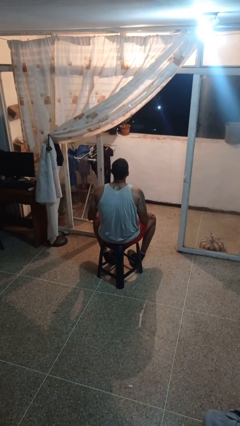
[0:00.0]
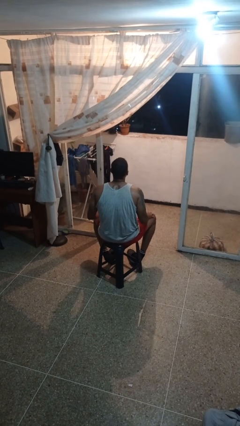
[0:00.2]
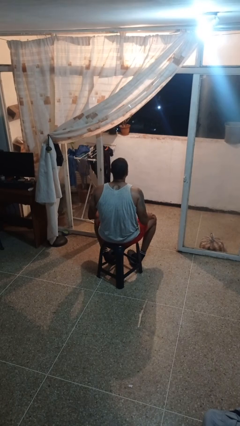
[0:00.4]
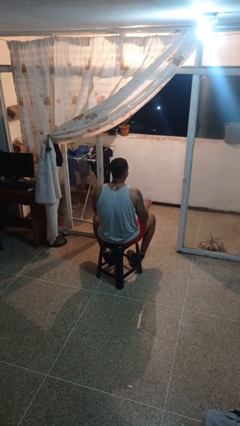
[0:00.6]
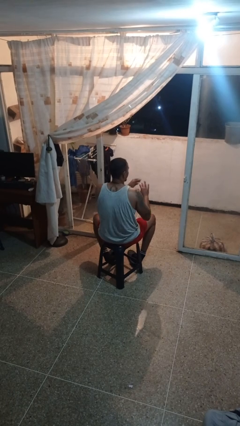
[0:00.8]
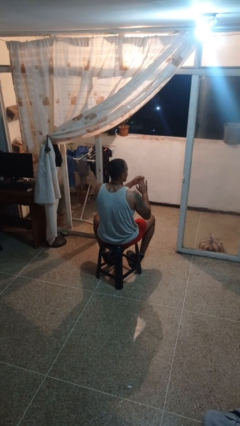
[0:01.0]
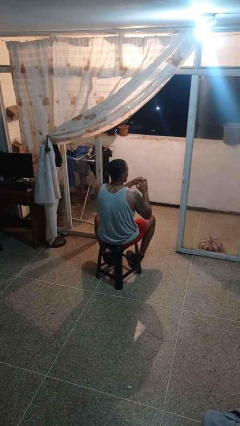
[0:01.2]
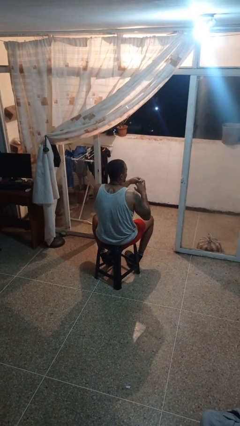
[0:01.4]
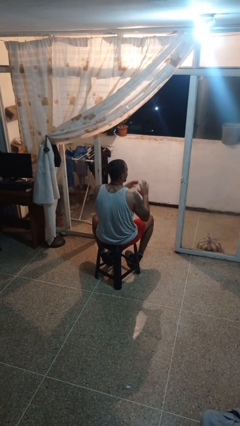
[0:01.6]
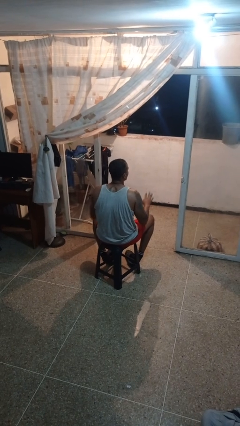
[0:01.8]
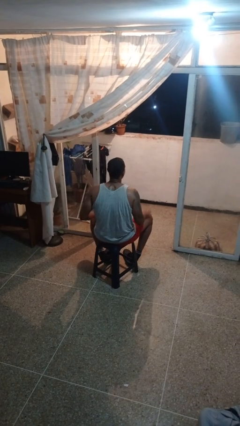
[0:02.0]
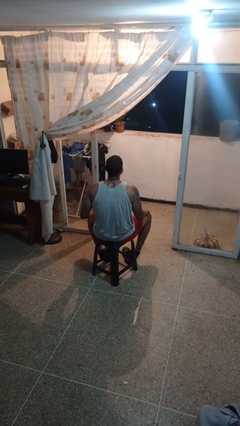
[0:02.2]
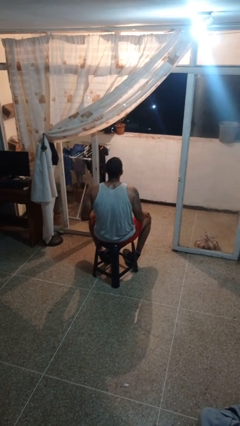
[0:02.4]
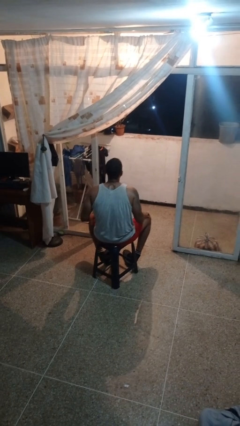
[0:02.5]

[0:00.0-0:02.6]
person puts on ring

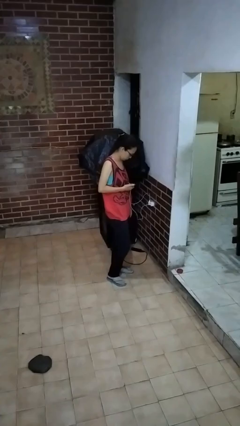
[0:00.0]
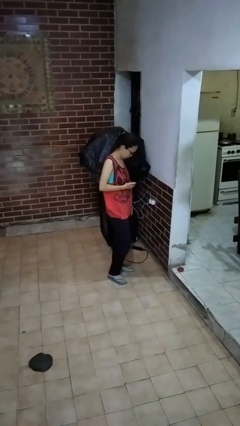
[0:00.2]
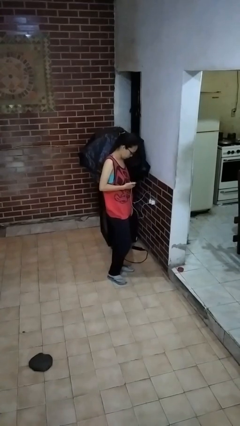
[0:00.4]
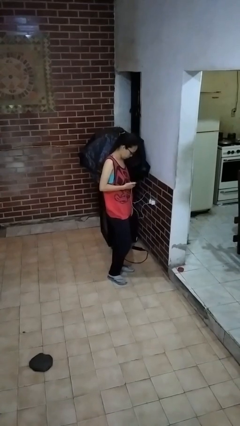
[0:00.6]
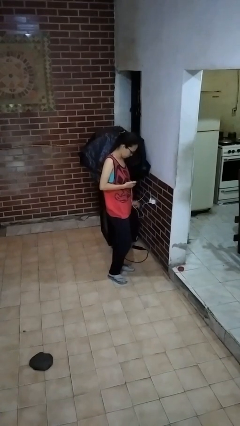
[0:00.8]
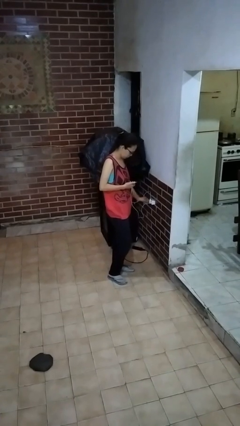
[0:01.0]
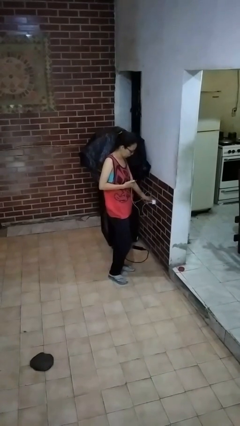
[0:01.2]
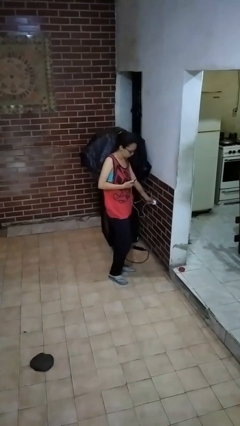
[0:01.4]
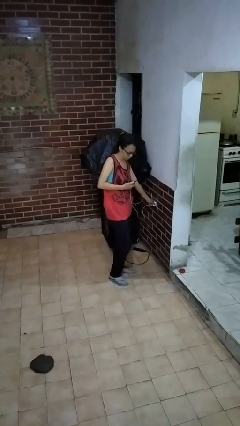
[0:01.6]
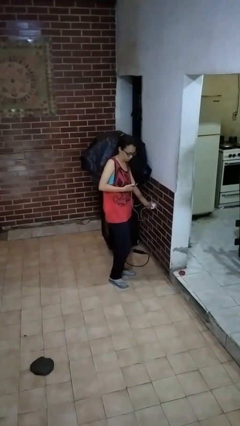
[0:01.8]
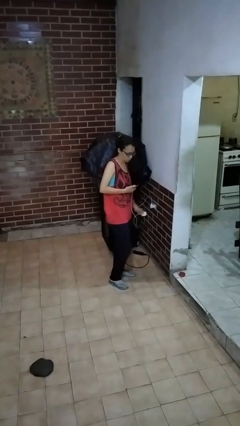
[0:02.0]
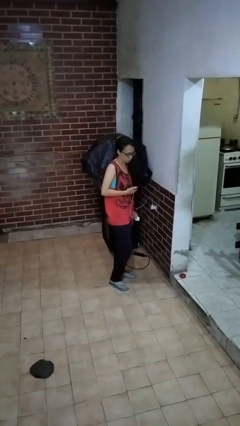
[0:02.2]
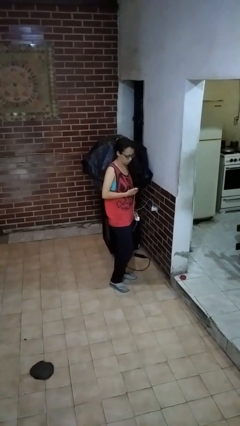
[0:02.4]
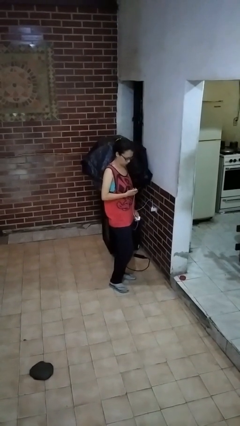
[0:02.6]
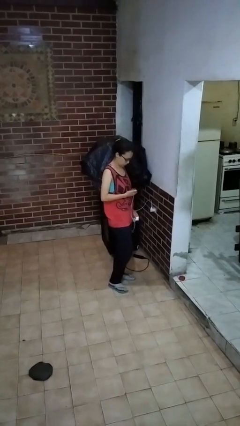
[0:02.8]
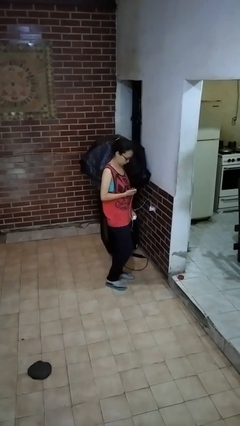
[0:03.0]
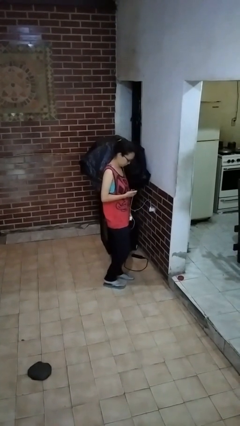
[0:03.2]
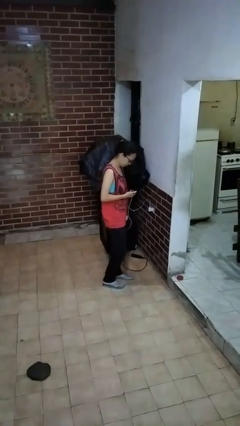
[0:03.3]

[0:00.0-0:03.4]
person unplugs from electrical socket

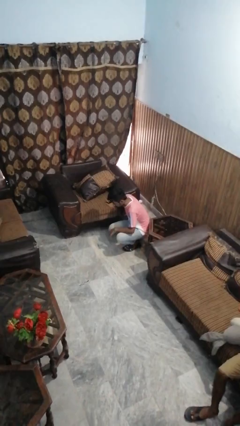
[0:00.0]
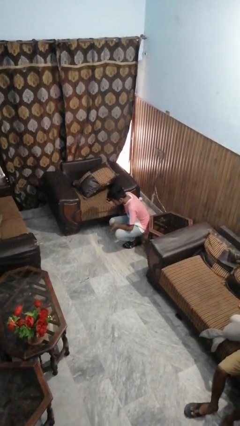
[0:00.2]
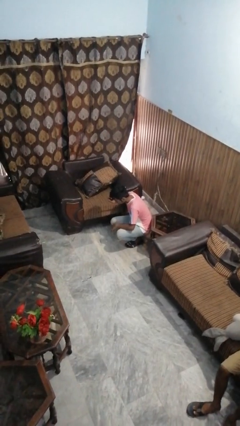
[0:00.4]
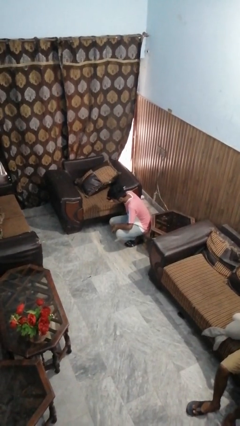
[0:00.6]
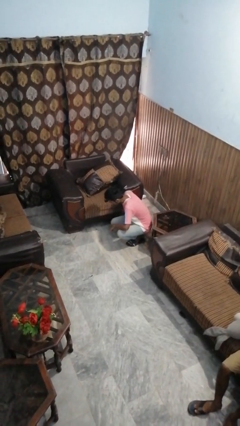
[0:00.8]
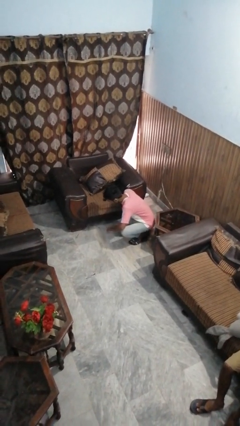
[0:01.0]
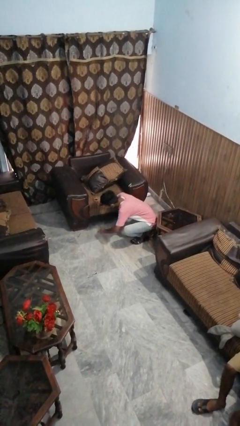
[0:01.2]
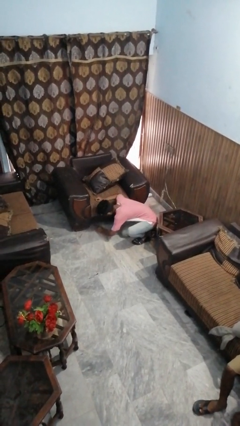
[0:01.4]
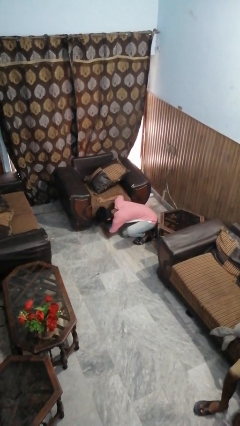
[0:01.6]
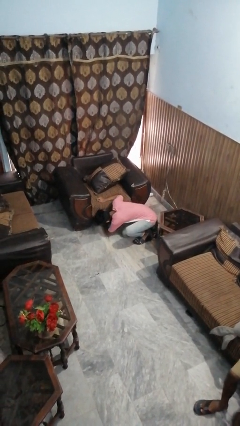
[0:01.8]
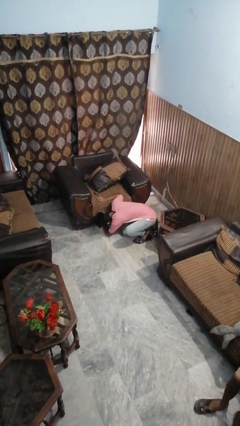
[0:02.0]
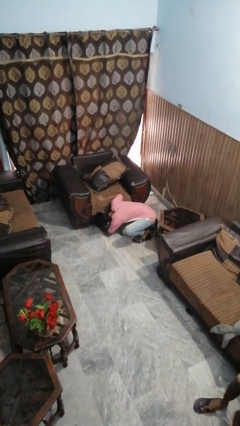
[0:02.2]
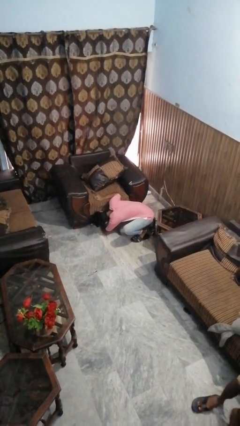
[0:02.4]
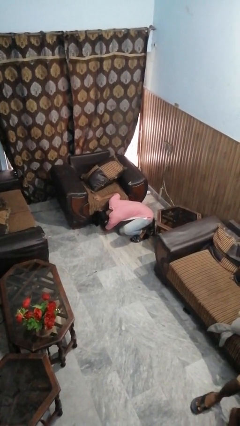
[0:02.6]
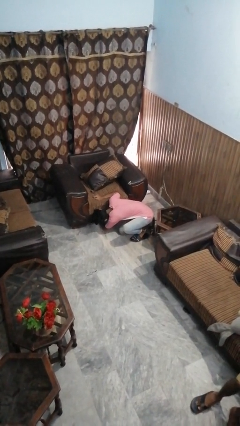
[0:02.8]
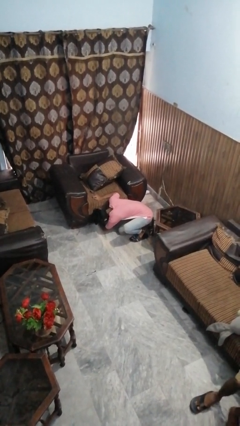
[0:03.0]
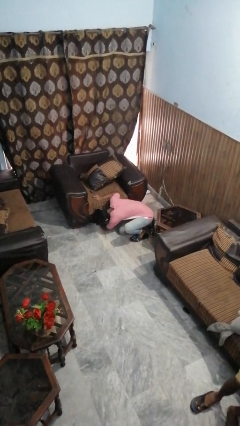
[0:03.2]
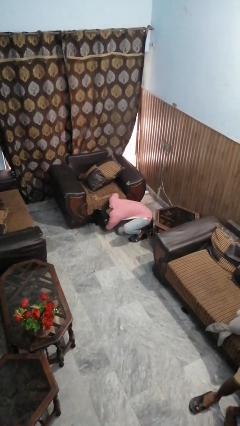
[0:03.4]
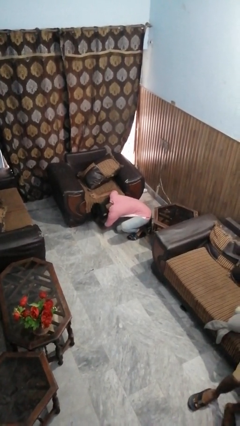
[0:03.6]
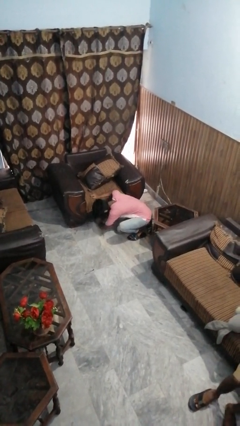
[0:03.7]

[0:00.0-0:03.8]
person searches under couch

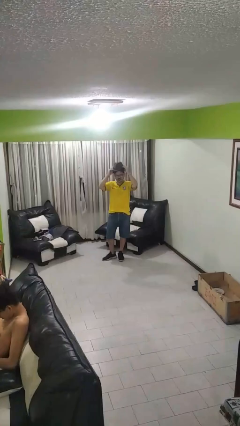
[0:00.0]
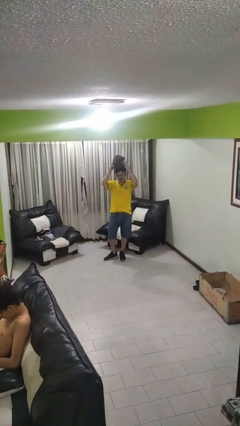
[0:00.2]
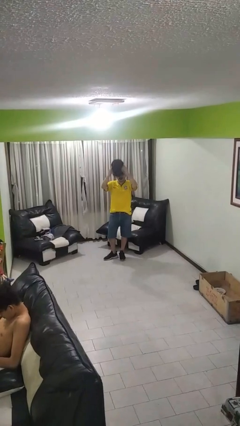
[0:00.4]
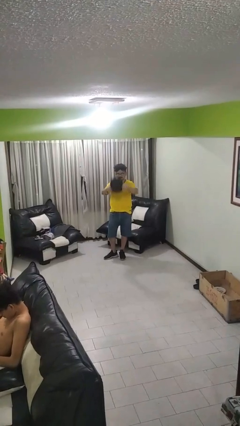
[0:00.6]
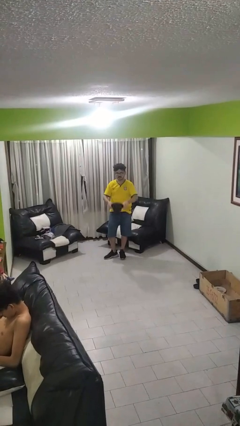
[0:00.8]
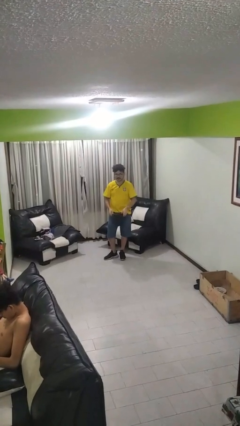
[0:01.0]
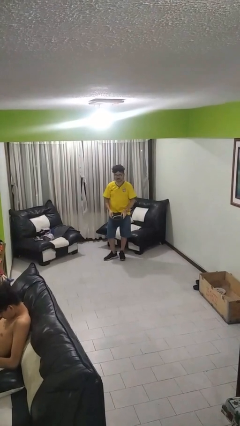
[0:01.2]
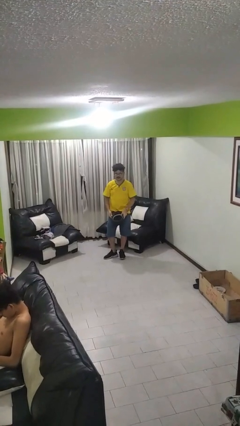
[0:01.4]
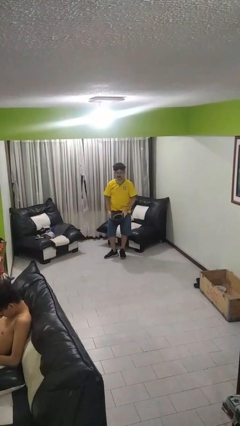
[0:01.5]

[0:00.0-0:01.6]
person takes off hat

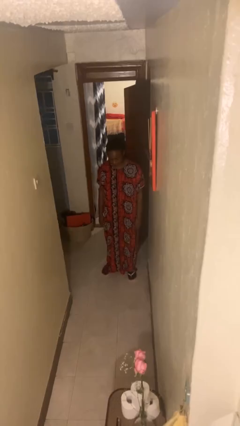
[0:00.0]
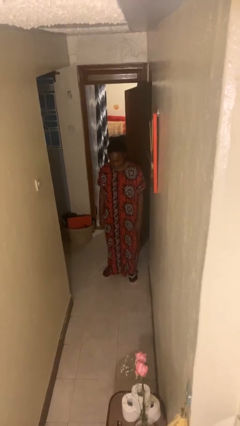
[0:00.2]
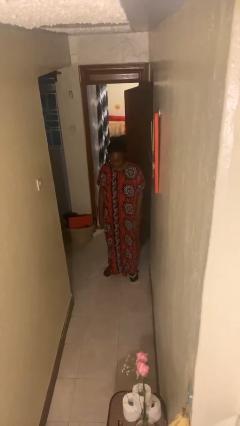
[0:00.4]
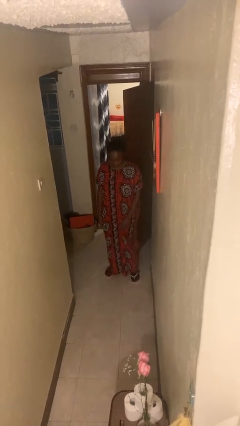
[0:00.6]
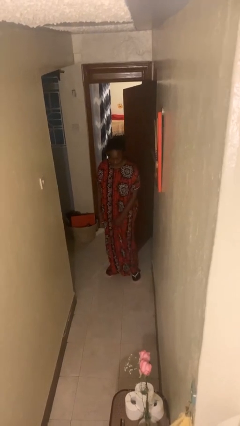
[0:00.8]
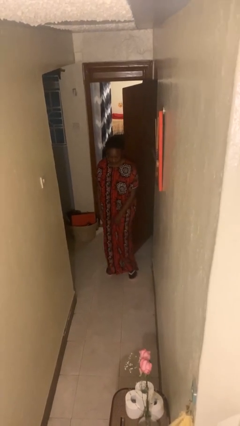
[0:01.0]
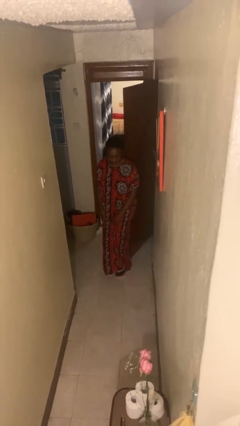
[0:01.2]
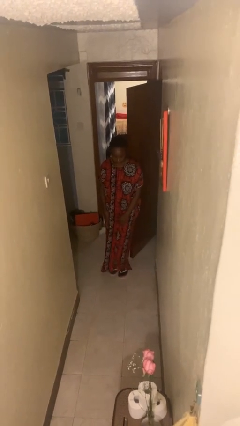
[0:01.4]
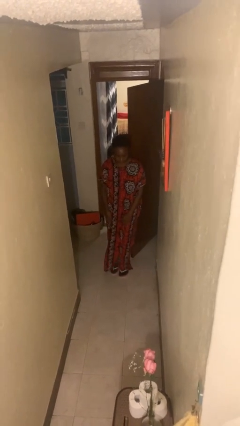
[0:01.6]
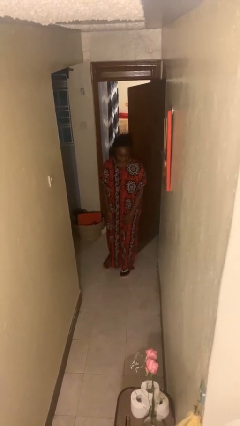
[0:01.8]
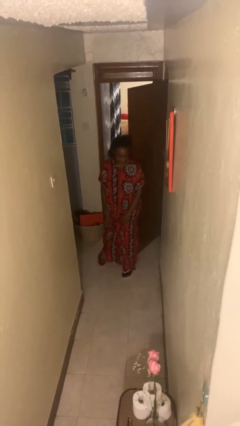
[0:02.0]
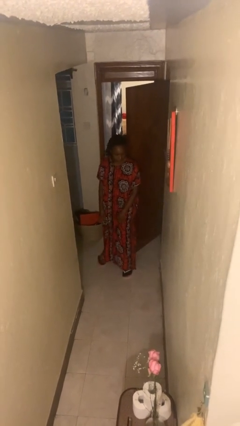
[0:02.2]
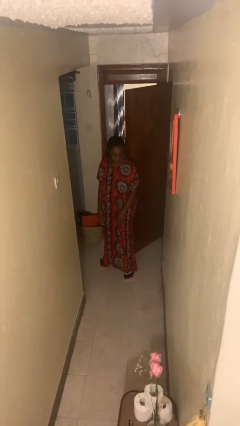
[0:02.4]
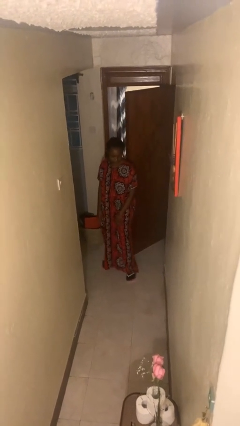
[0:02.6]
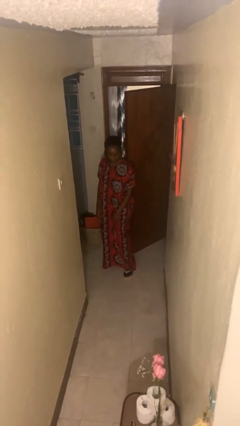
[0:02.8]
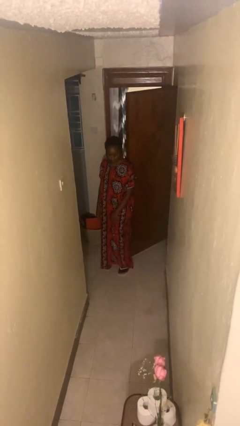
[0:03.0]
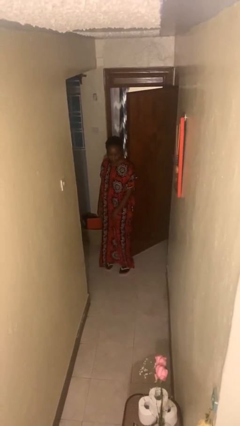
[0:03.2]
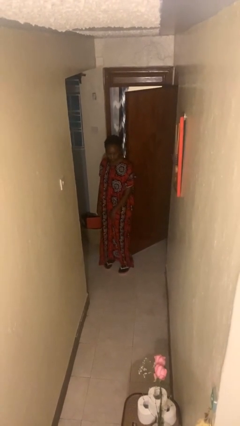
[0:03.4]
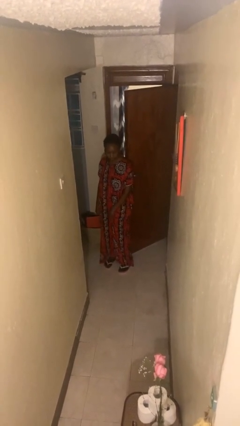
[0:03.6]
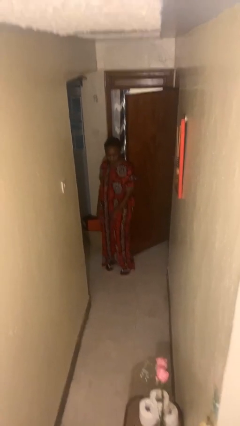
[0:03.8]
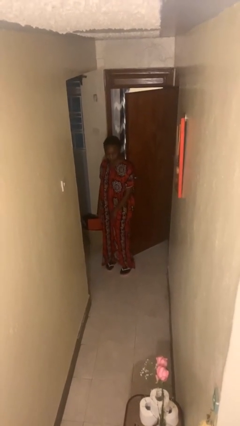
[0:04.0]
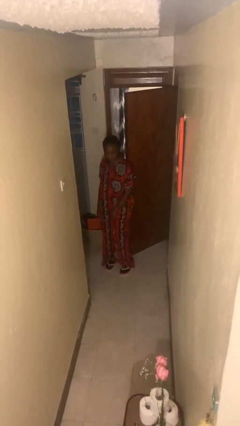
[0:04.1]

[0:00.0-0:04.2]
person opens facility door

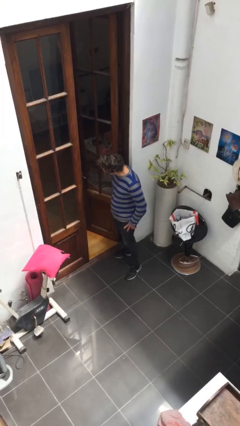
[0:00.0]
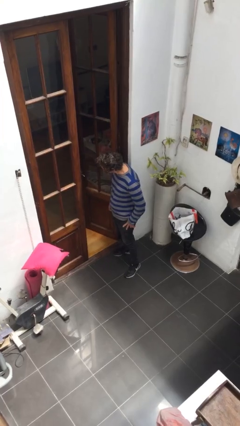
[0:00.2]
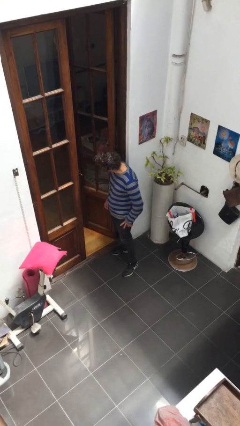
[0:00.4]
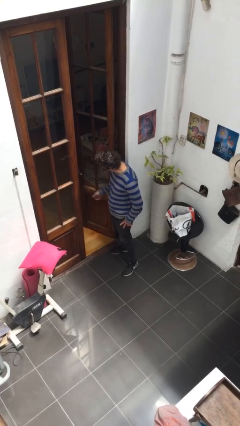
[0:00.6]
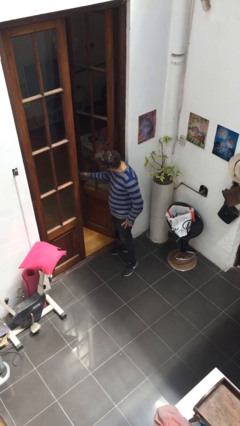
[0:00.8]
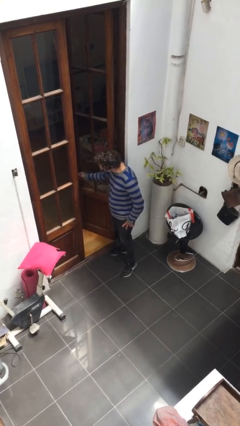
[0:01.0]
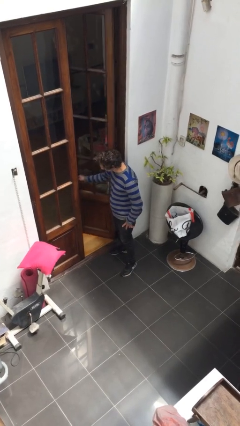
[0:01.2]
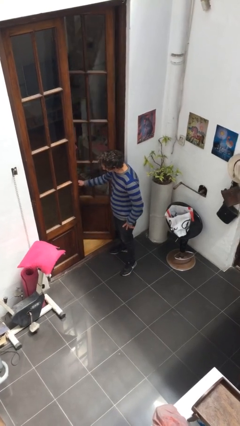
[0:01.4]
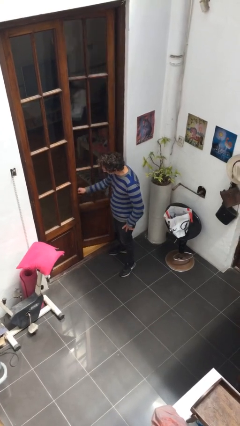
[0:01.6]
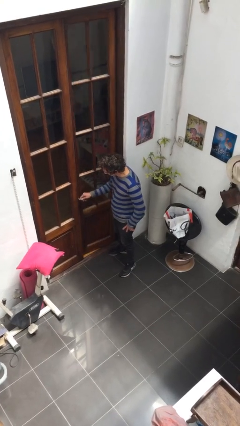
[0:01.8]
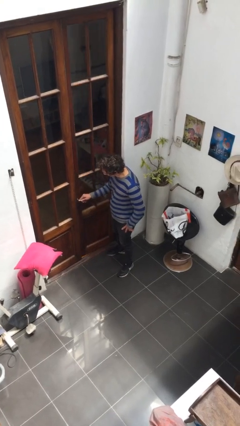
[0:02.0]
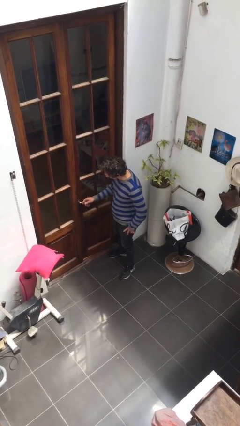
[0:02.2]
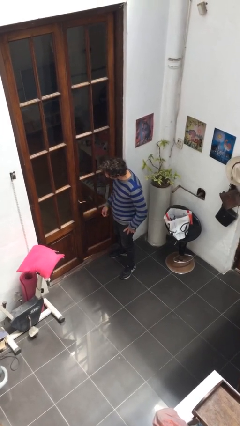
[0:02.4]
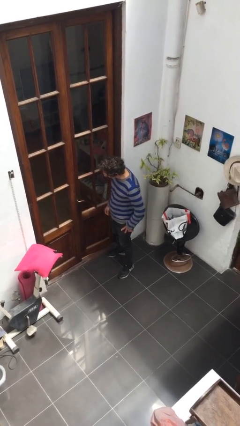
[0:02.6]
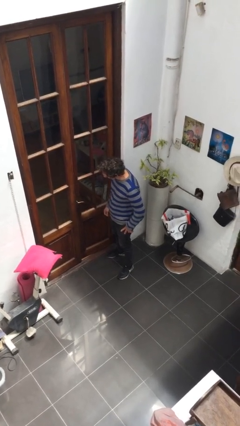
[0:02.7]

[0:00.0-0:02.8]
person closes facility door
